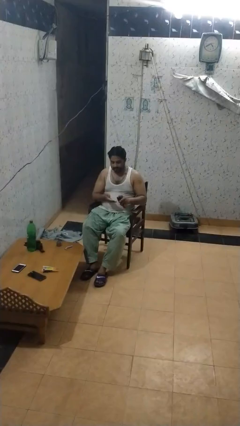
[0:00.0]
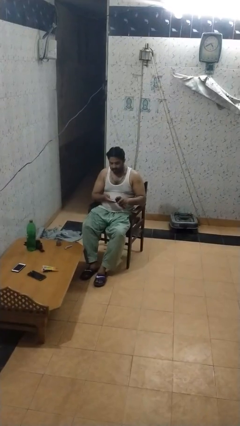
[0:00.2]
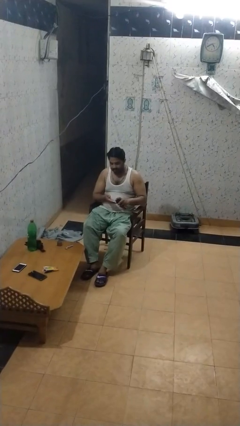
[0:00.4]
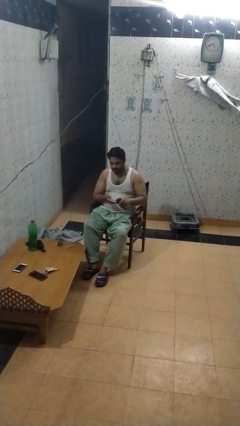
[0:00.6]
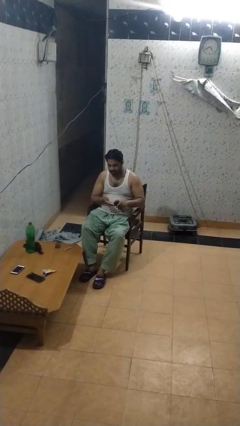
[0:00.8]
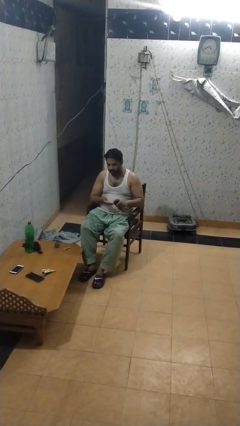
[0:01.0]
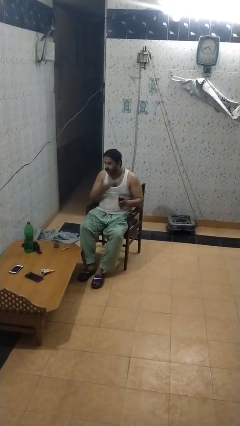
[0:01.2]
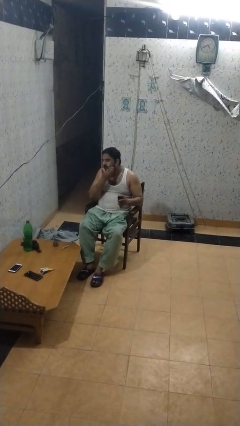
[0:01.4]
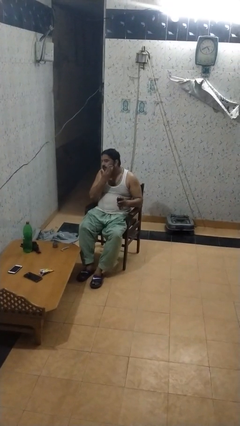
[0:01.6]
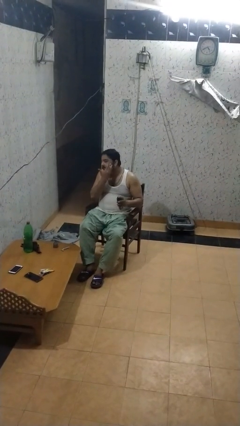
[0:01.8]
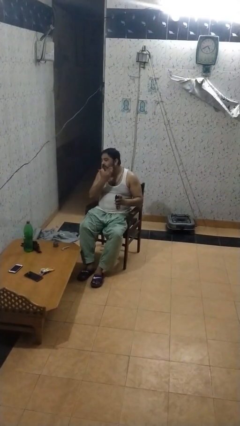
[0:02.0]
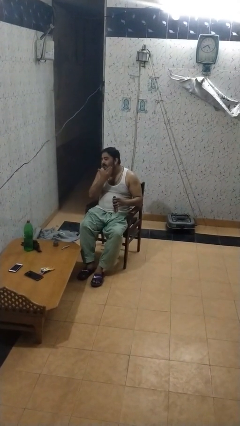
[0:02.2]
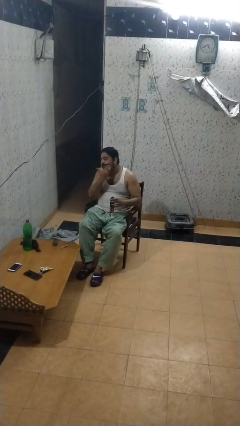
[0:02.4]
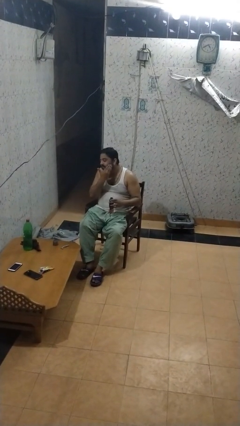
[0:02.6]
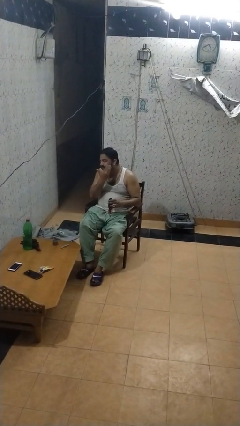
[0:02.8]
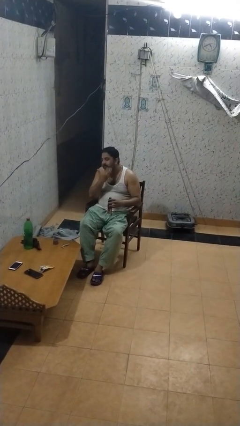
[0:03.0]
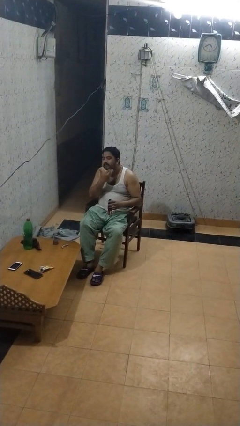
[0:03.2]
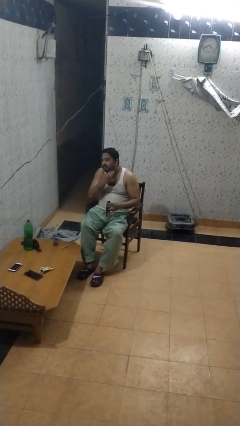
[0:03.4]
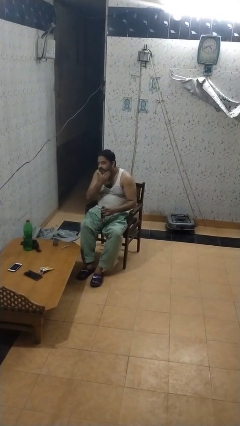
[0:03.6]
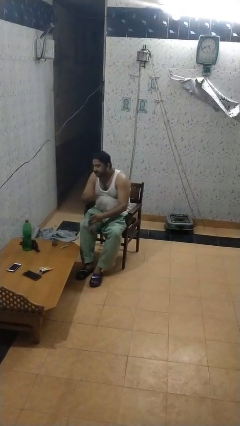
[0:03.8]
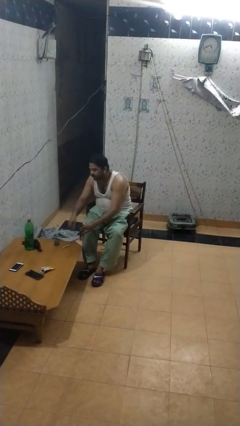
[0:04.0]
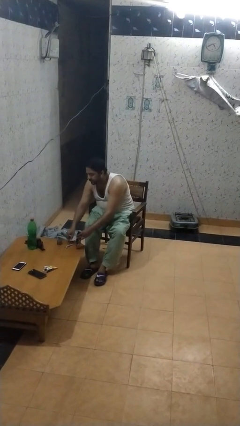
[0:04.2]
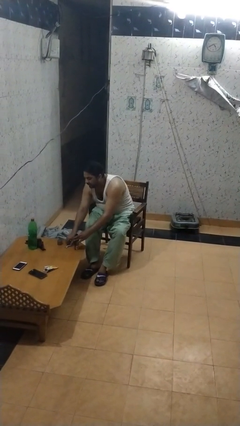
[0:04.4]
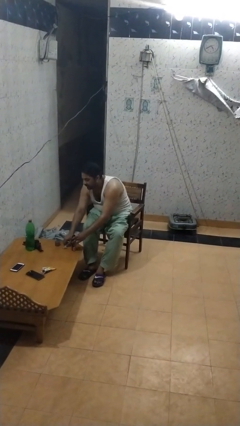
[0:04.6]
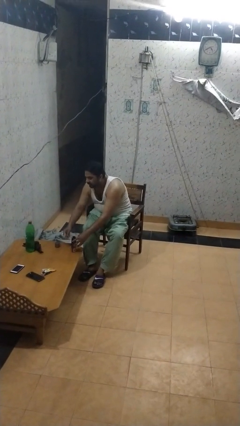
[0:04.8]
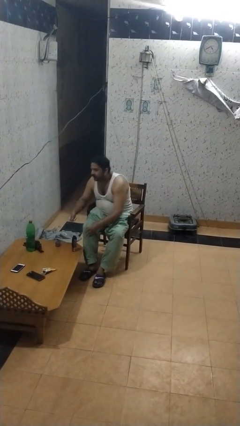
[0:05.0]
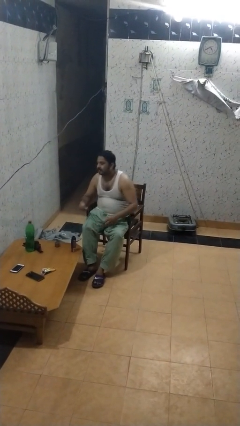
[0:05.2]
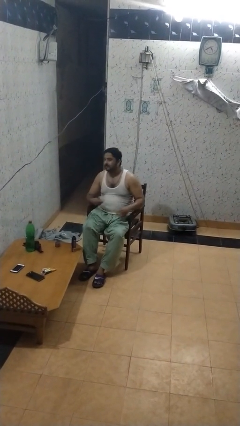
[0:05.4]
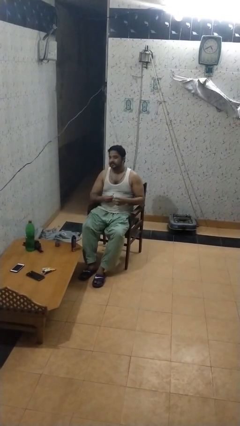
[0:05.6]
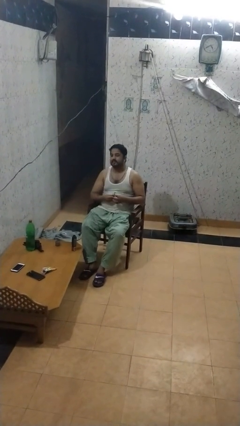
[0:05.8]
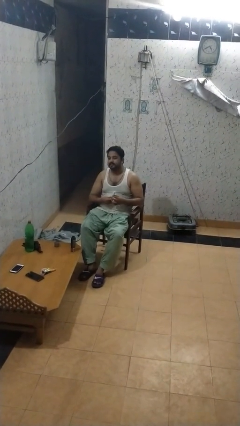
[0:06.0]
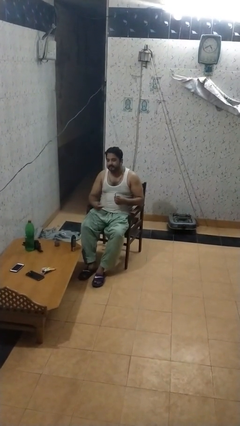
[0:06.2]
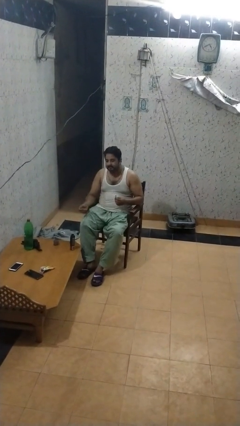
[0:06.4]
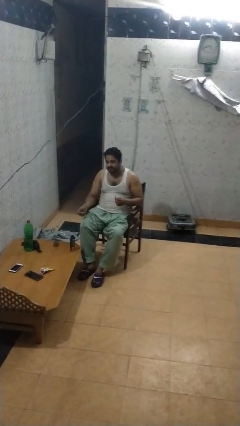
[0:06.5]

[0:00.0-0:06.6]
person applies shaving cream

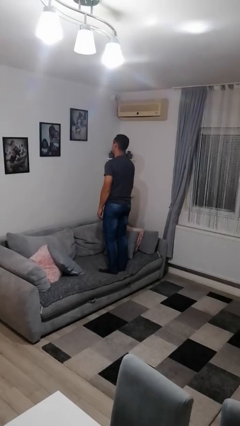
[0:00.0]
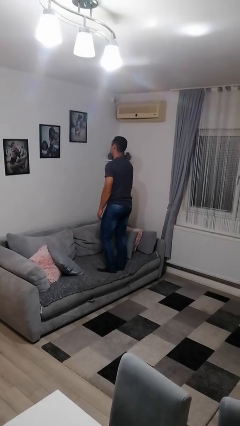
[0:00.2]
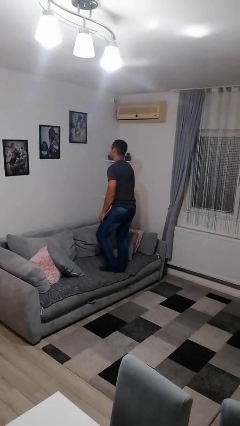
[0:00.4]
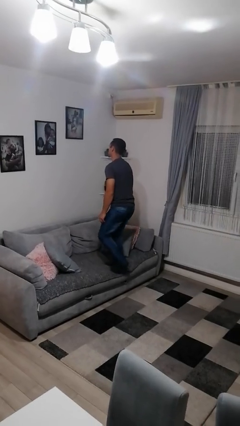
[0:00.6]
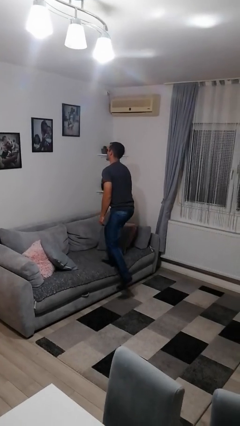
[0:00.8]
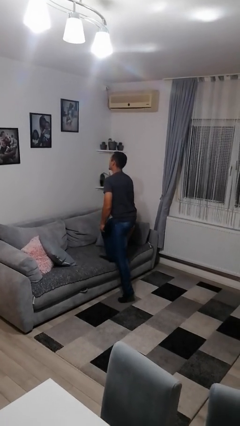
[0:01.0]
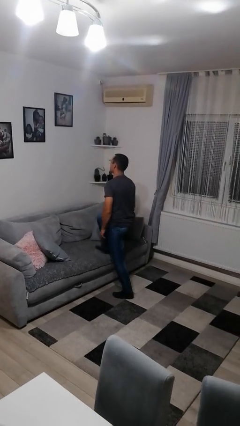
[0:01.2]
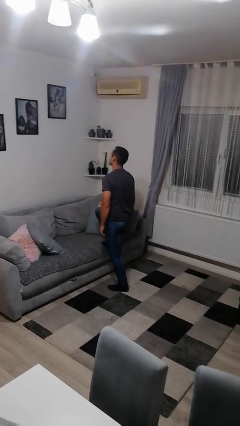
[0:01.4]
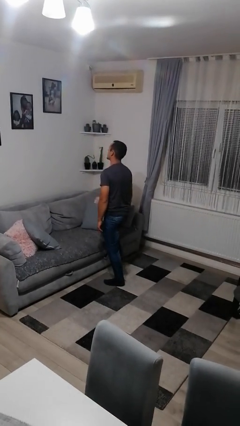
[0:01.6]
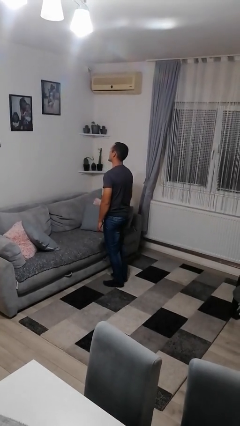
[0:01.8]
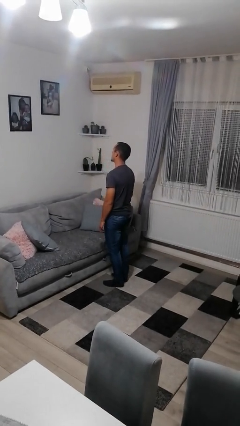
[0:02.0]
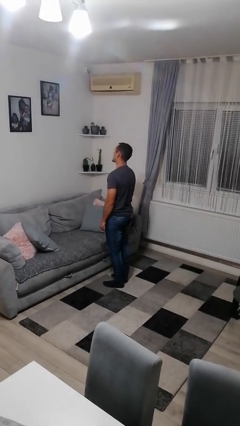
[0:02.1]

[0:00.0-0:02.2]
person climbs off couch

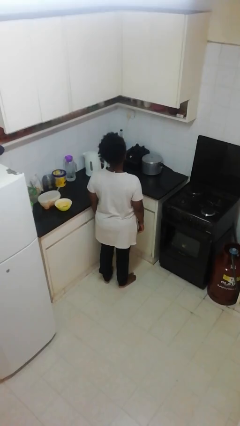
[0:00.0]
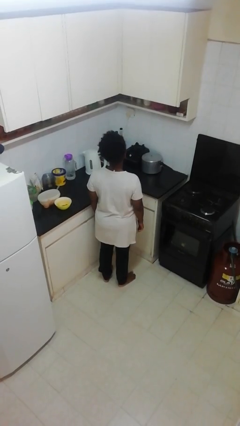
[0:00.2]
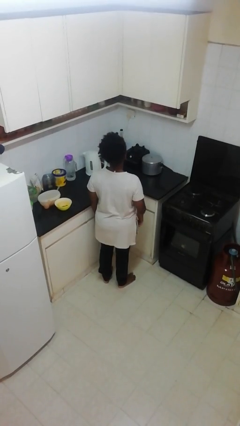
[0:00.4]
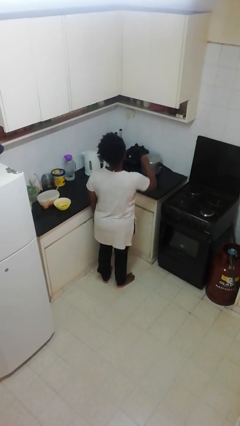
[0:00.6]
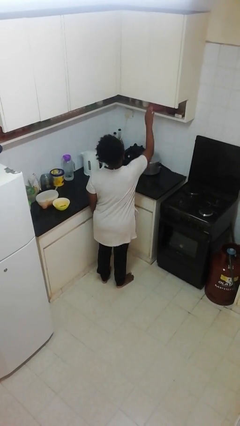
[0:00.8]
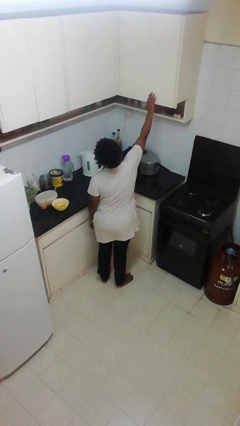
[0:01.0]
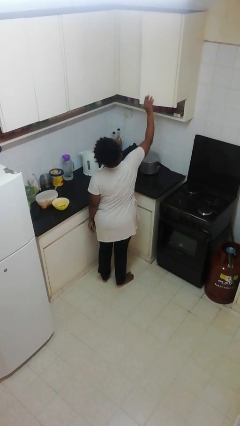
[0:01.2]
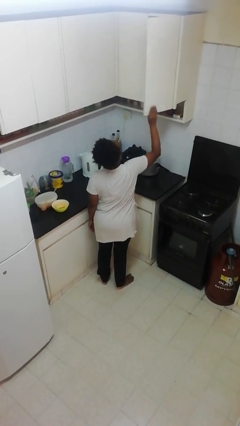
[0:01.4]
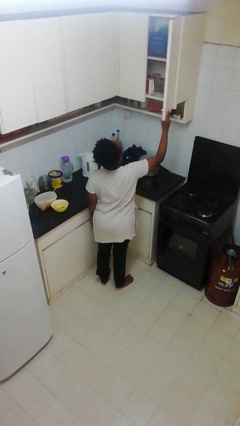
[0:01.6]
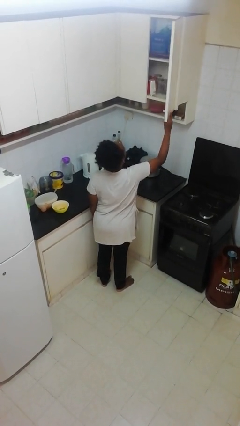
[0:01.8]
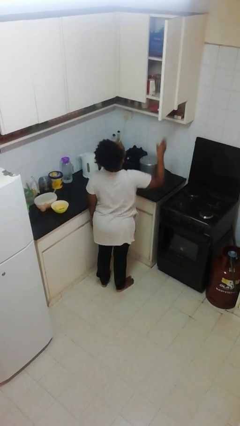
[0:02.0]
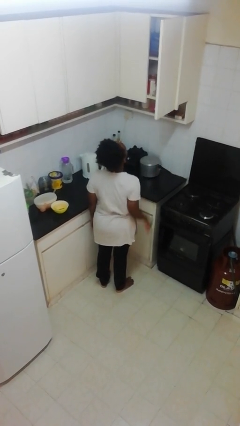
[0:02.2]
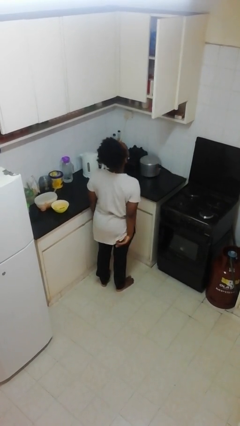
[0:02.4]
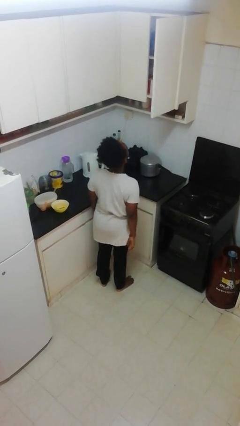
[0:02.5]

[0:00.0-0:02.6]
person opens cabinet

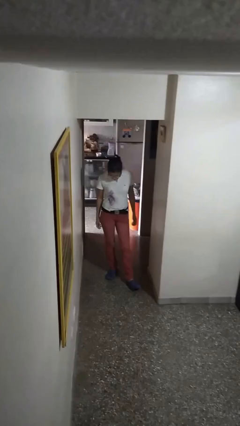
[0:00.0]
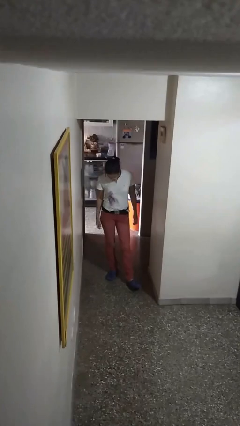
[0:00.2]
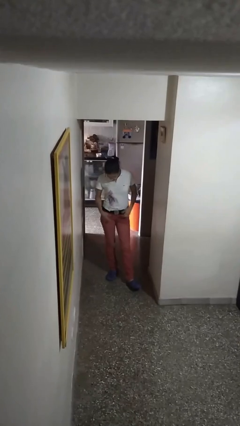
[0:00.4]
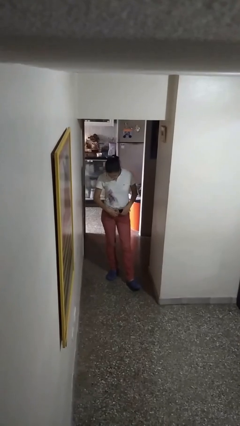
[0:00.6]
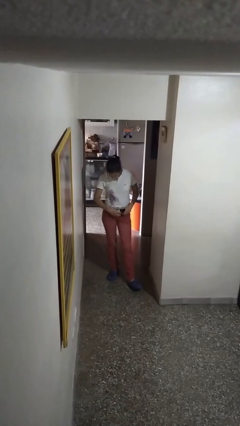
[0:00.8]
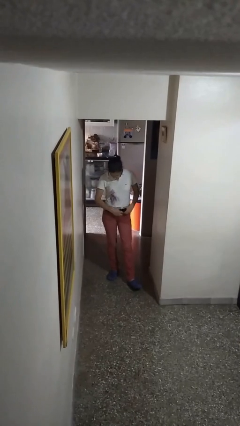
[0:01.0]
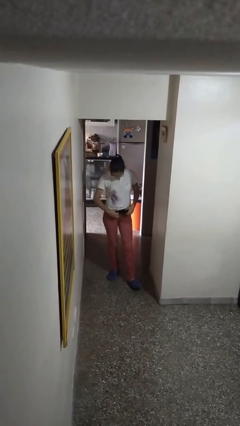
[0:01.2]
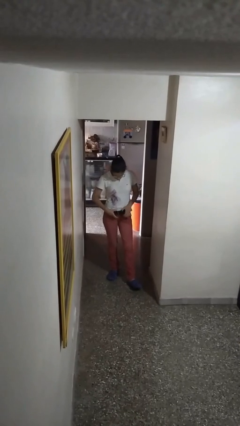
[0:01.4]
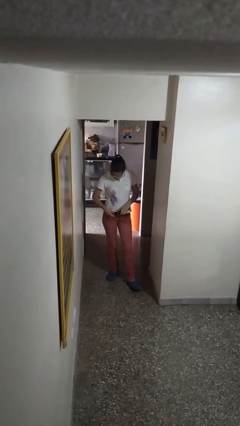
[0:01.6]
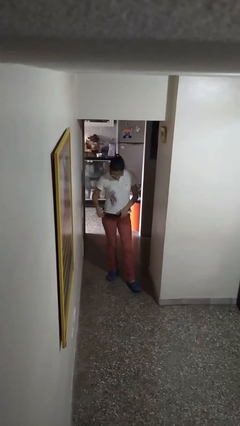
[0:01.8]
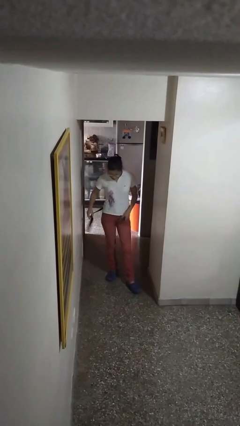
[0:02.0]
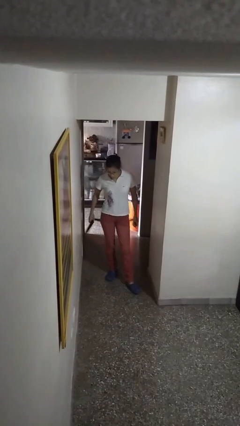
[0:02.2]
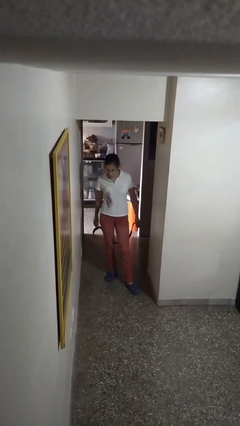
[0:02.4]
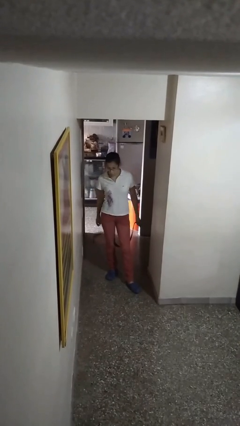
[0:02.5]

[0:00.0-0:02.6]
person takes off belt

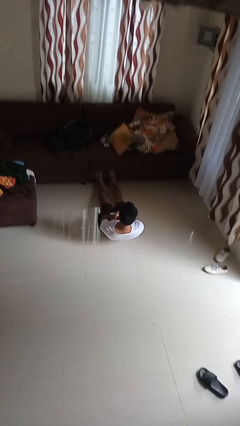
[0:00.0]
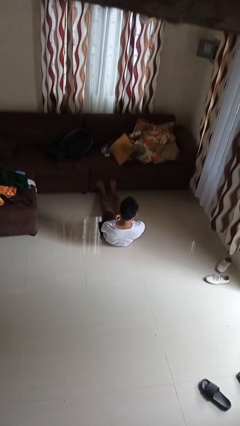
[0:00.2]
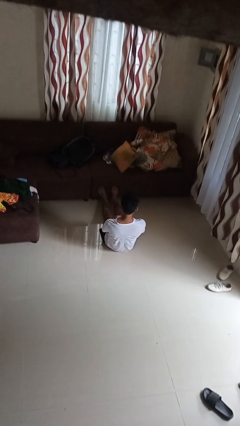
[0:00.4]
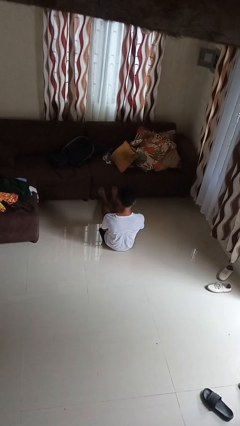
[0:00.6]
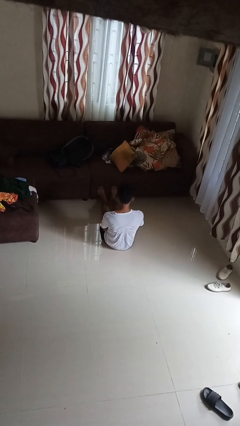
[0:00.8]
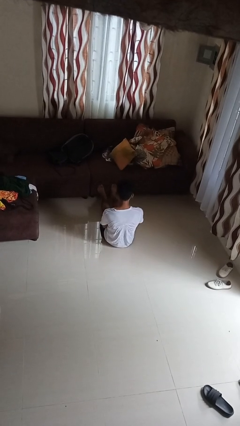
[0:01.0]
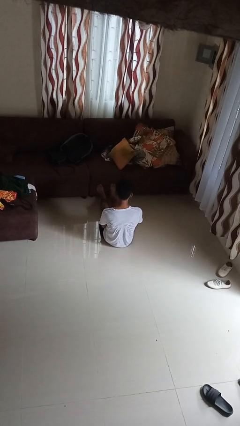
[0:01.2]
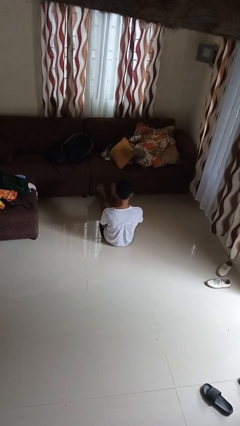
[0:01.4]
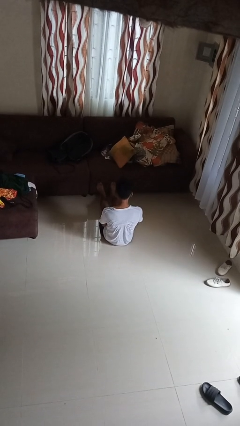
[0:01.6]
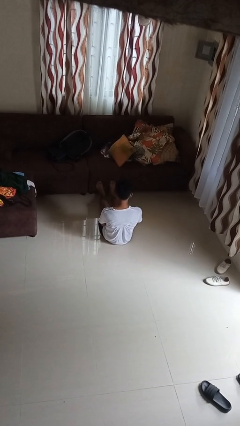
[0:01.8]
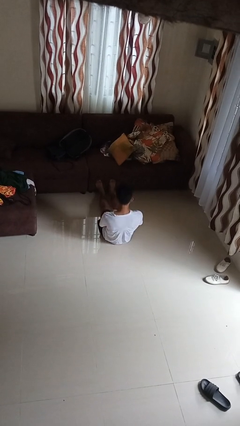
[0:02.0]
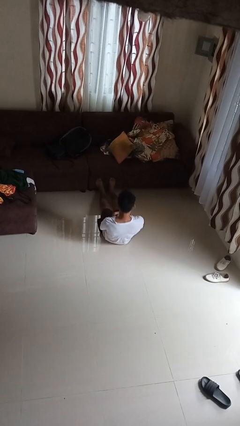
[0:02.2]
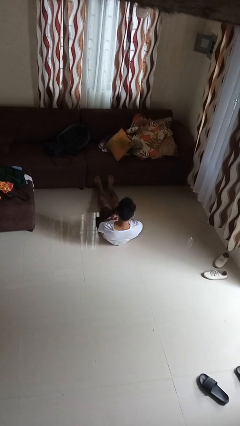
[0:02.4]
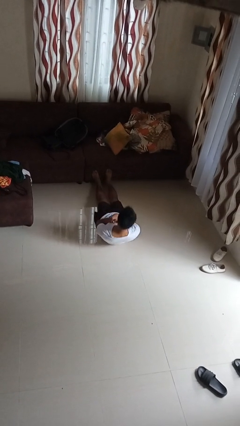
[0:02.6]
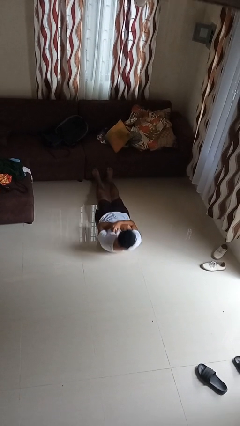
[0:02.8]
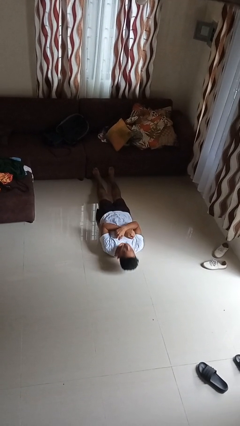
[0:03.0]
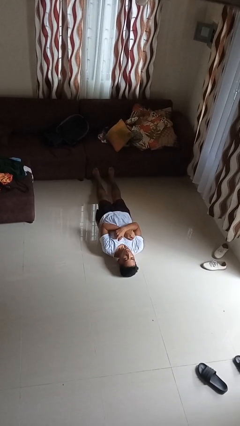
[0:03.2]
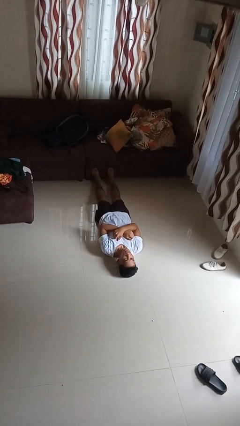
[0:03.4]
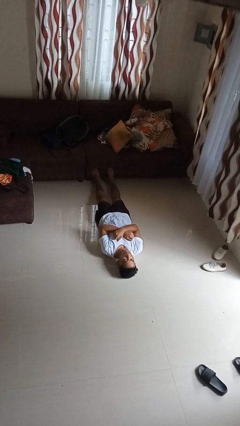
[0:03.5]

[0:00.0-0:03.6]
person exercises with situp

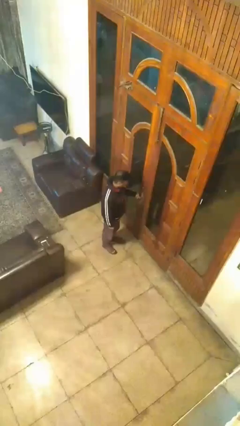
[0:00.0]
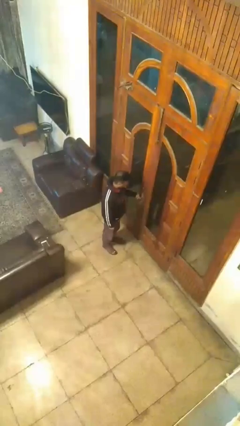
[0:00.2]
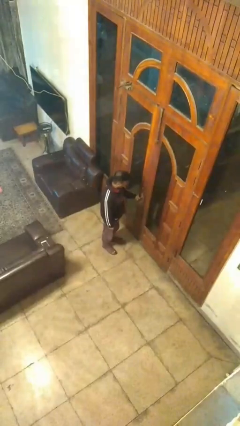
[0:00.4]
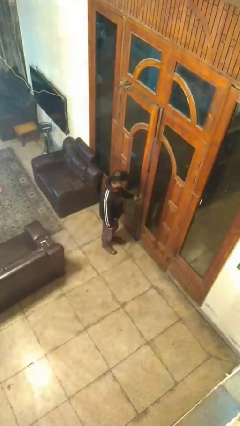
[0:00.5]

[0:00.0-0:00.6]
person opens facility door
